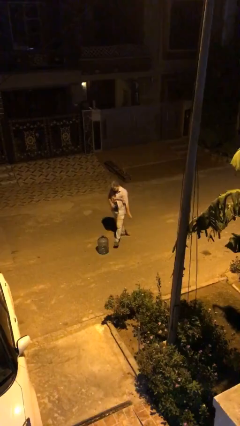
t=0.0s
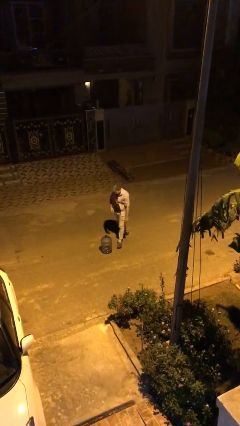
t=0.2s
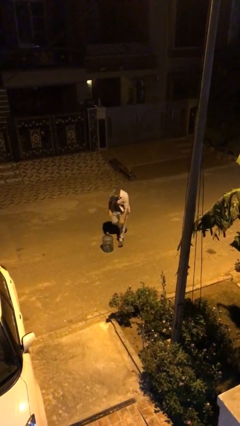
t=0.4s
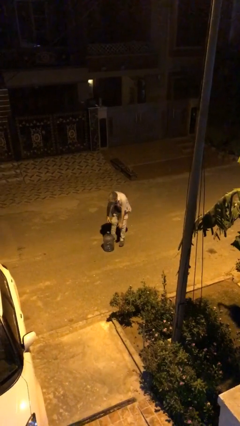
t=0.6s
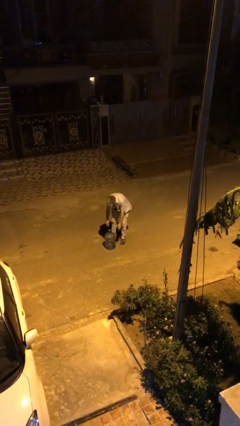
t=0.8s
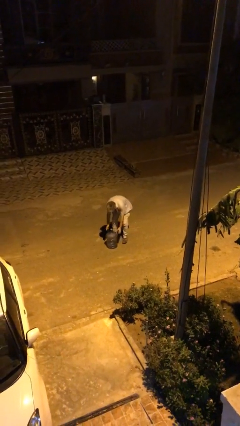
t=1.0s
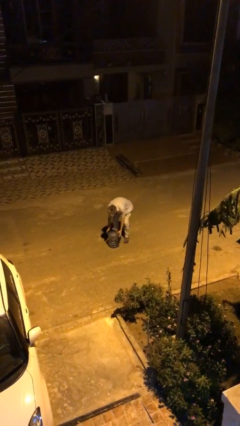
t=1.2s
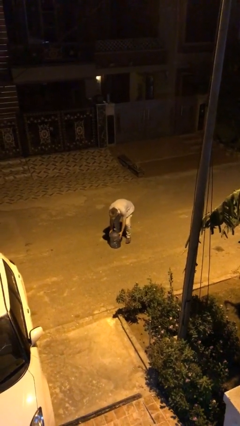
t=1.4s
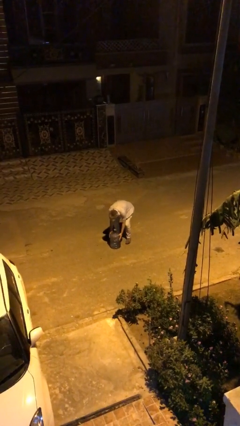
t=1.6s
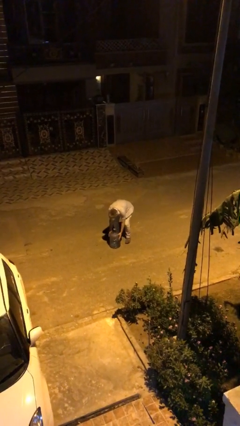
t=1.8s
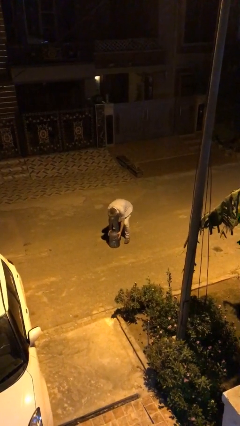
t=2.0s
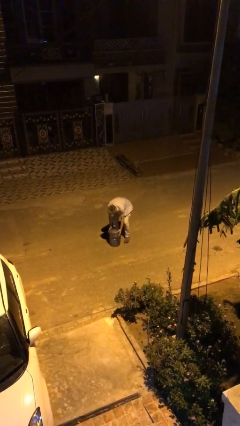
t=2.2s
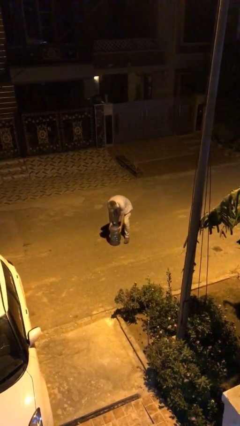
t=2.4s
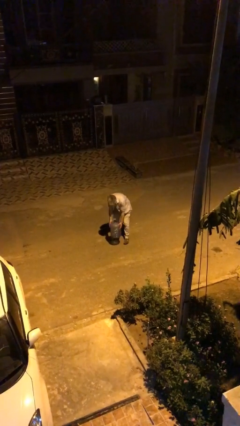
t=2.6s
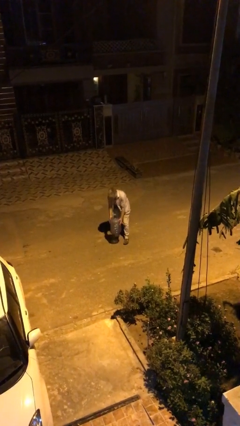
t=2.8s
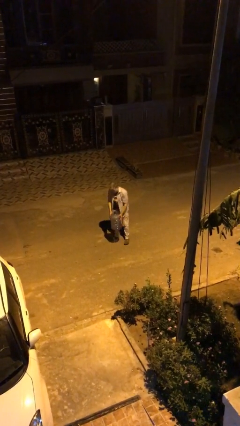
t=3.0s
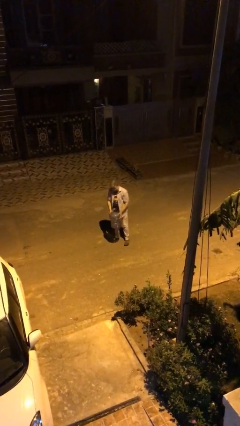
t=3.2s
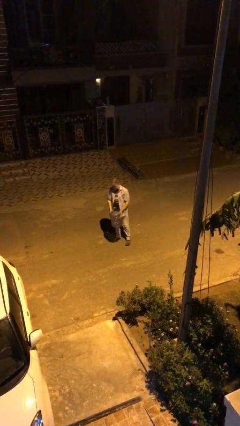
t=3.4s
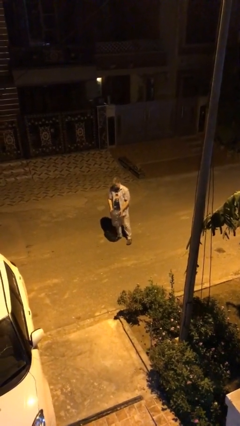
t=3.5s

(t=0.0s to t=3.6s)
person picks up object from floor

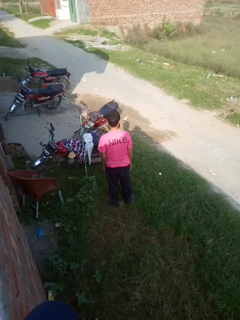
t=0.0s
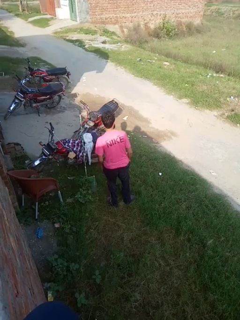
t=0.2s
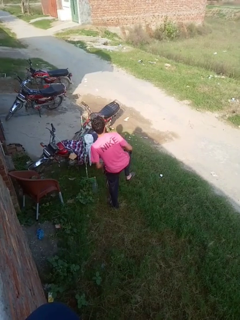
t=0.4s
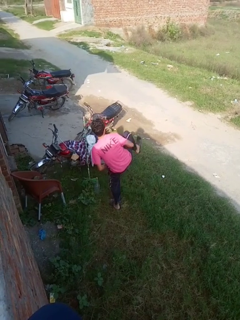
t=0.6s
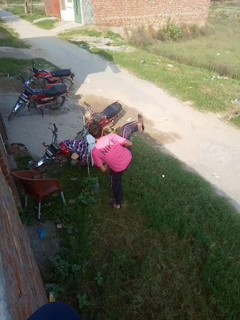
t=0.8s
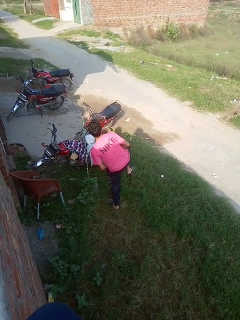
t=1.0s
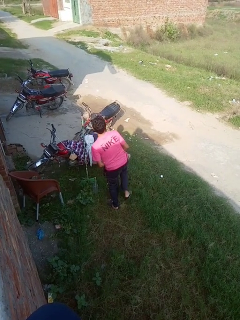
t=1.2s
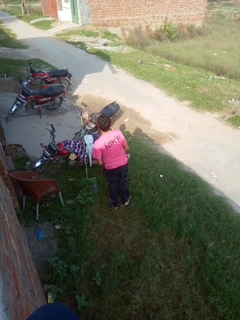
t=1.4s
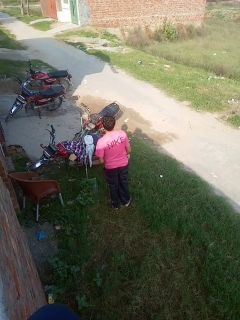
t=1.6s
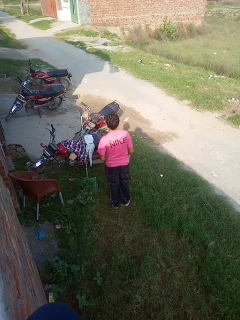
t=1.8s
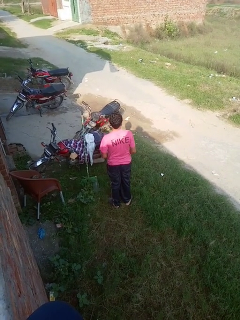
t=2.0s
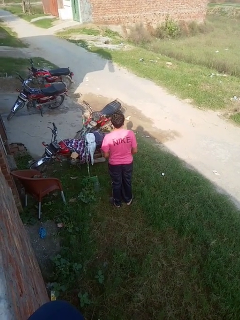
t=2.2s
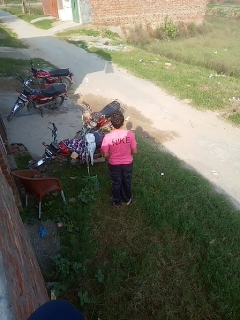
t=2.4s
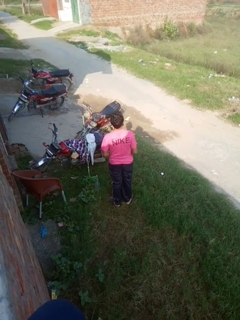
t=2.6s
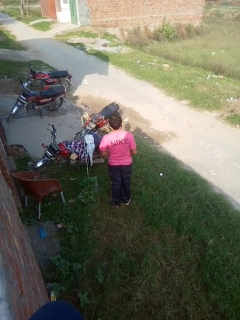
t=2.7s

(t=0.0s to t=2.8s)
person karate kicks

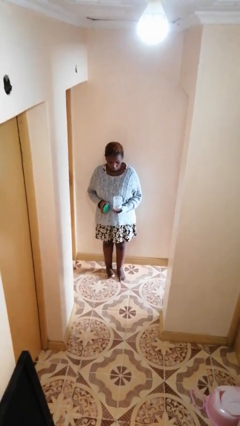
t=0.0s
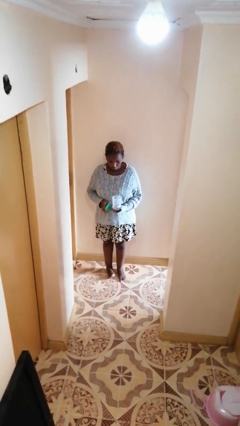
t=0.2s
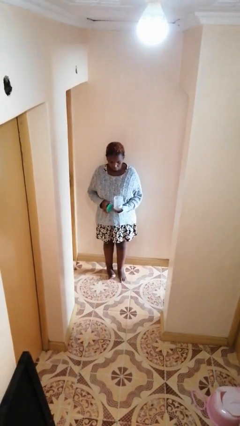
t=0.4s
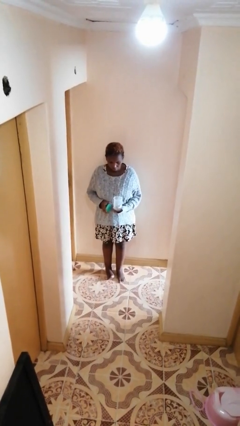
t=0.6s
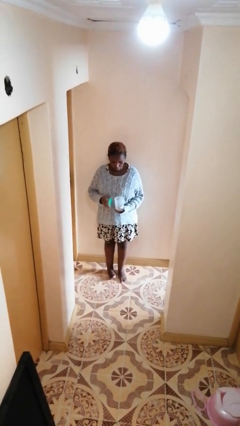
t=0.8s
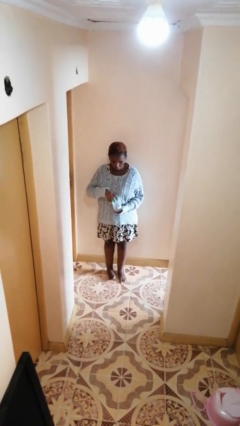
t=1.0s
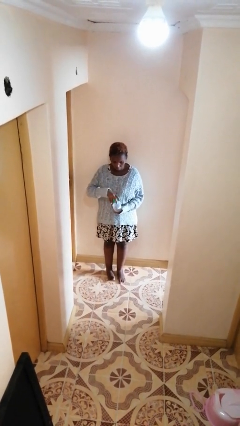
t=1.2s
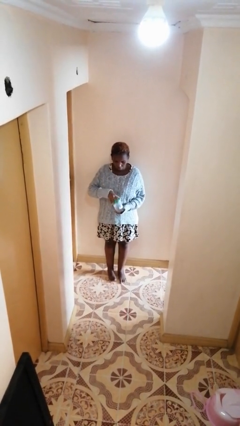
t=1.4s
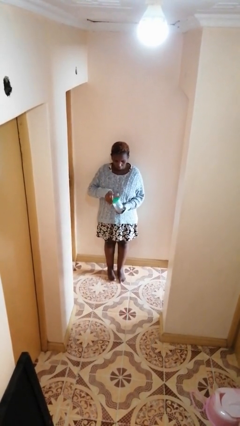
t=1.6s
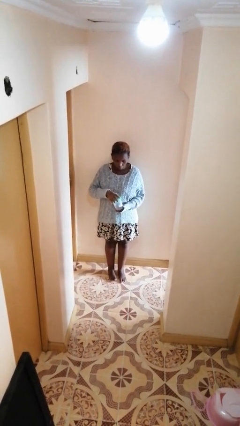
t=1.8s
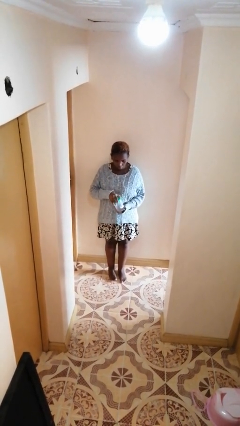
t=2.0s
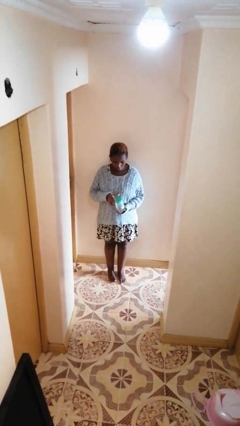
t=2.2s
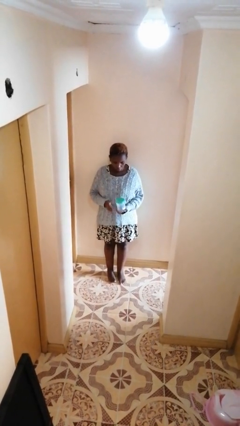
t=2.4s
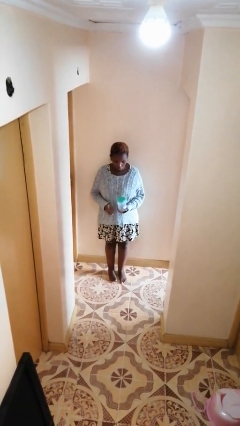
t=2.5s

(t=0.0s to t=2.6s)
person closes jar

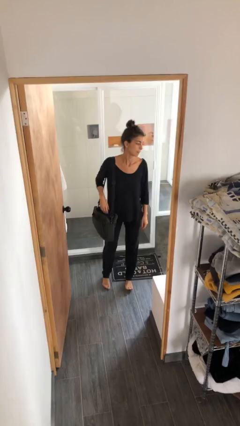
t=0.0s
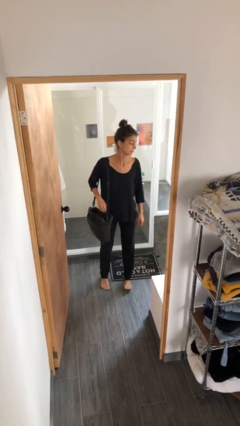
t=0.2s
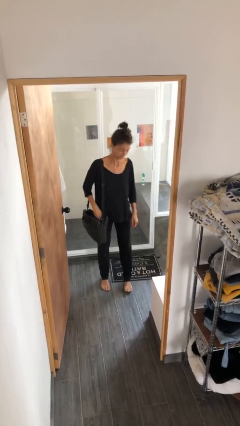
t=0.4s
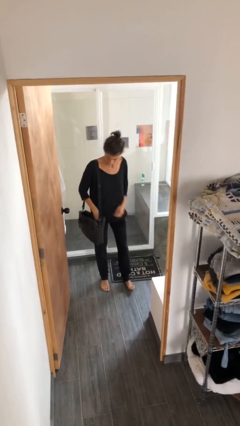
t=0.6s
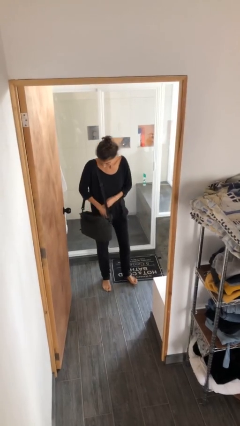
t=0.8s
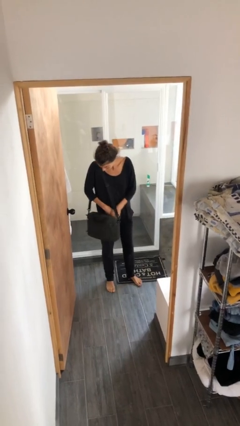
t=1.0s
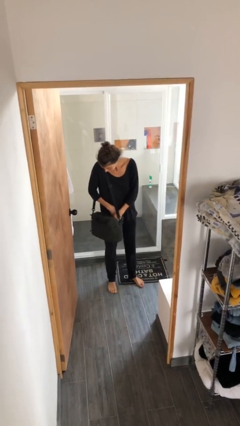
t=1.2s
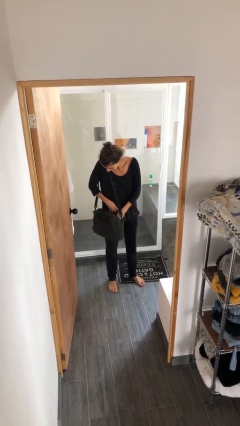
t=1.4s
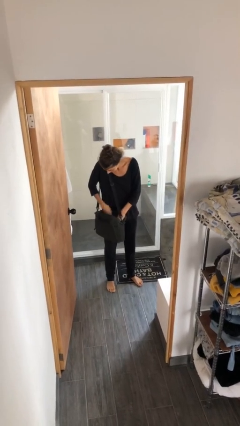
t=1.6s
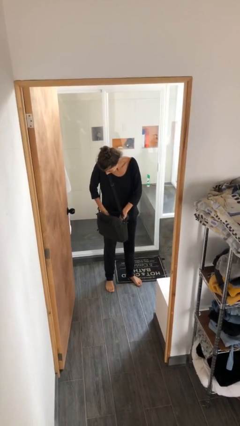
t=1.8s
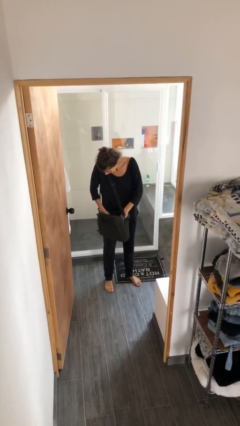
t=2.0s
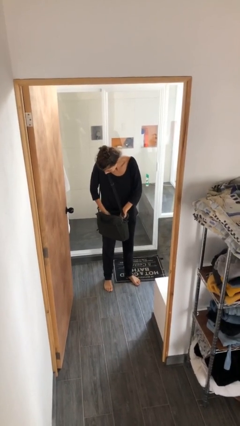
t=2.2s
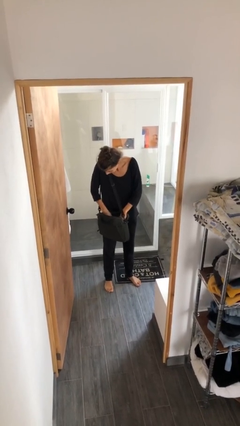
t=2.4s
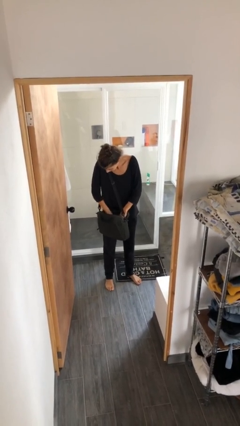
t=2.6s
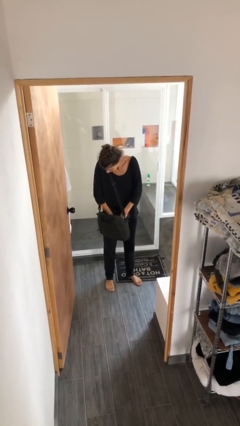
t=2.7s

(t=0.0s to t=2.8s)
person searches in purse

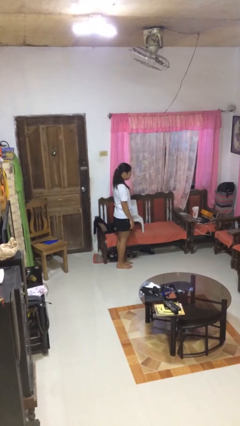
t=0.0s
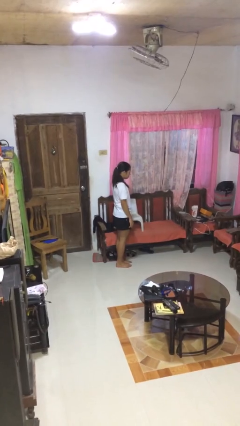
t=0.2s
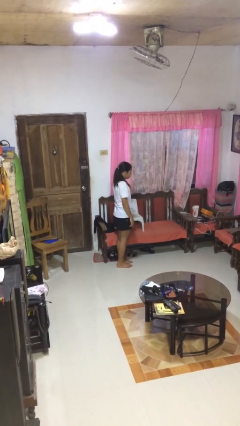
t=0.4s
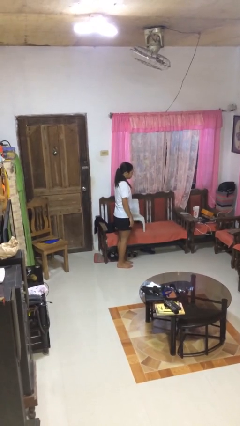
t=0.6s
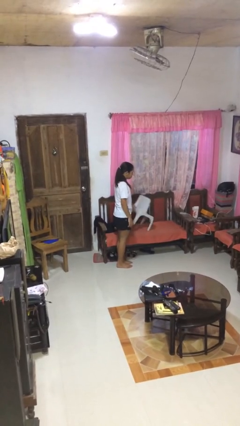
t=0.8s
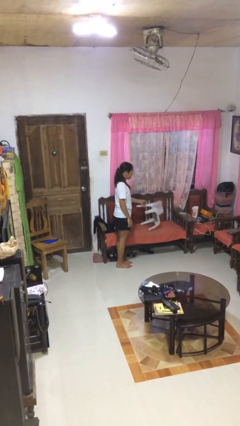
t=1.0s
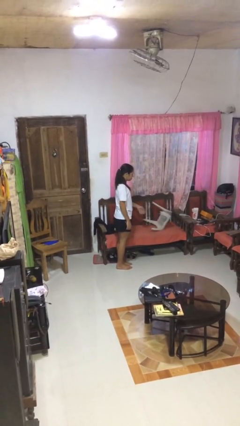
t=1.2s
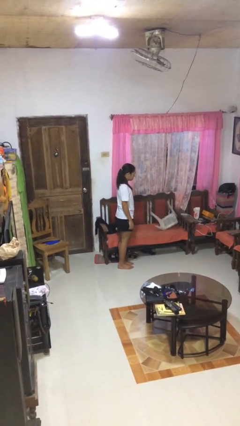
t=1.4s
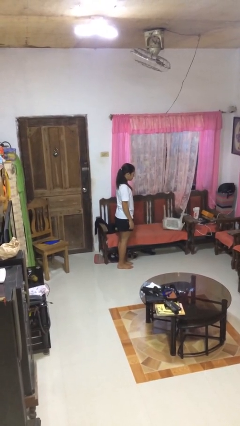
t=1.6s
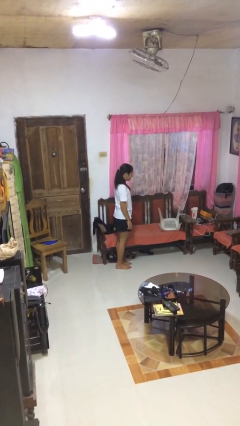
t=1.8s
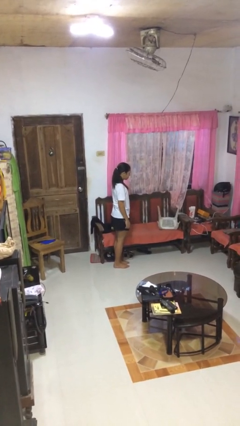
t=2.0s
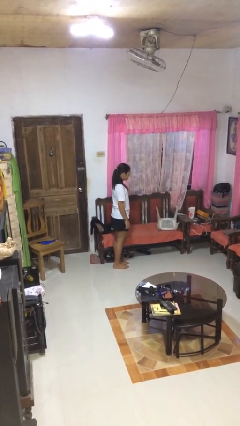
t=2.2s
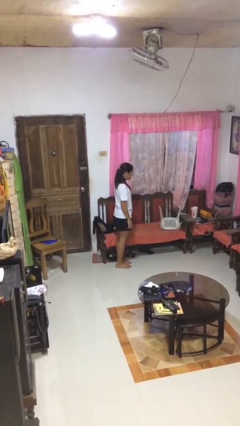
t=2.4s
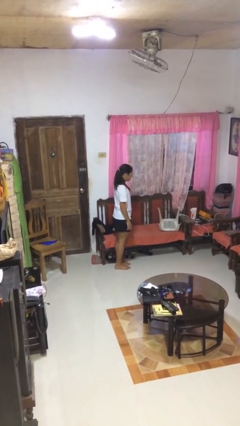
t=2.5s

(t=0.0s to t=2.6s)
person knocks over furniture

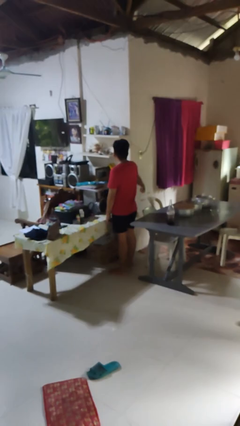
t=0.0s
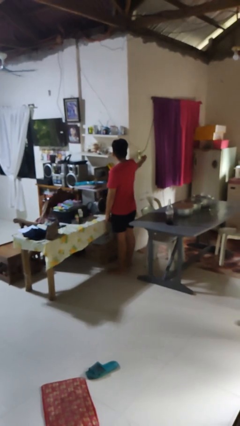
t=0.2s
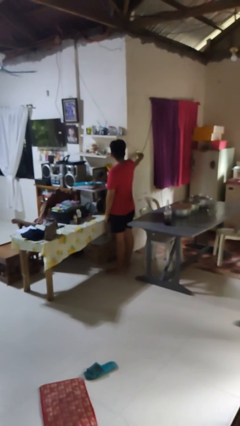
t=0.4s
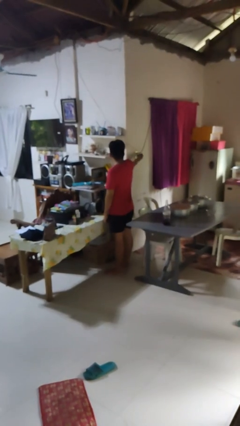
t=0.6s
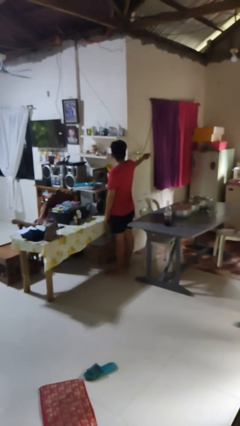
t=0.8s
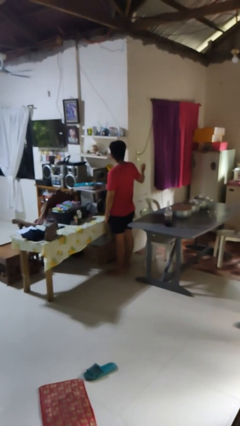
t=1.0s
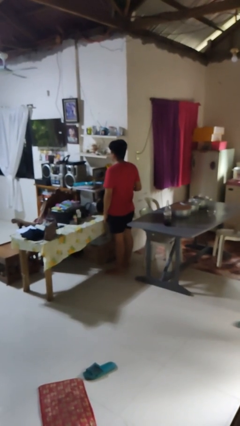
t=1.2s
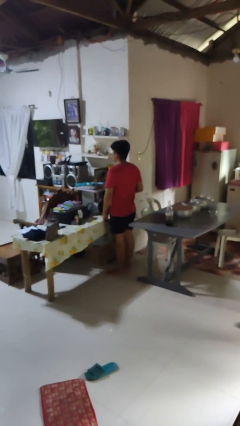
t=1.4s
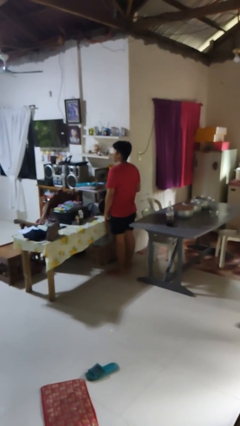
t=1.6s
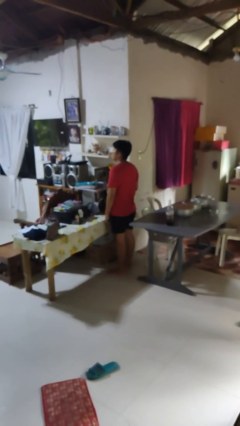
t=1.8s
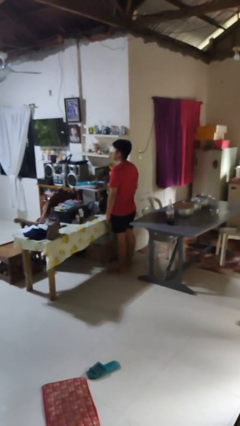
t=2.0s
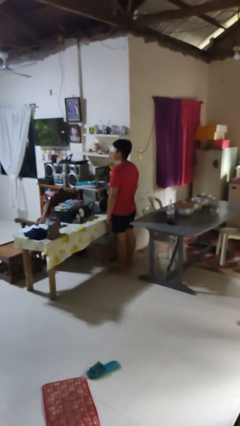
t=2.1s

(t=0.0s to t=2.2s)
person turns off fan

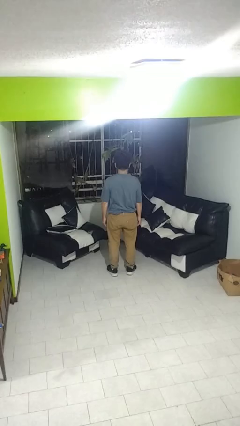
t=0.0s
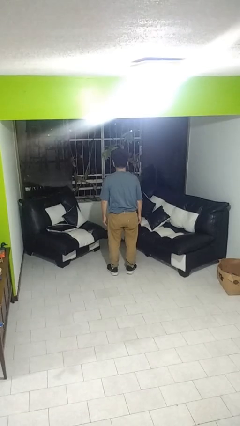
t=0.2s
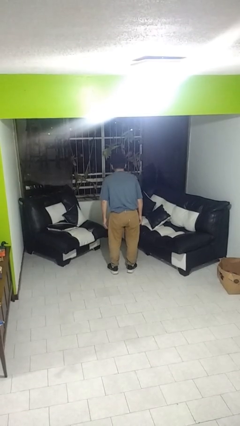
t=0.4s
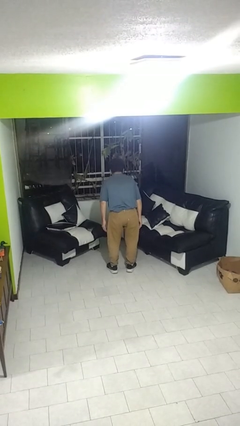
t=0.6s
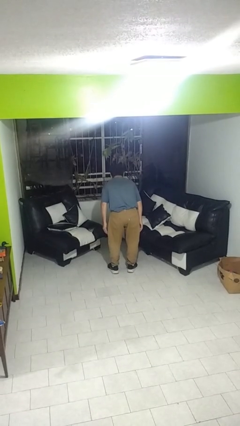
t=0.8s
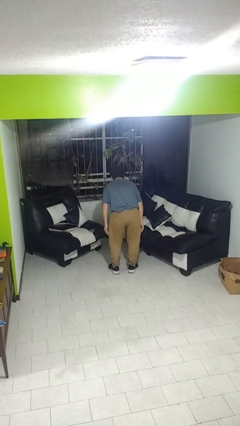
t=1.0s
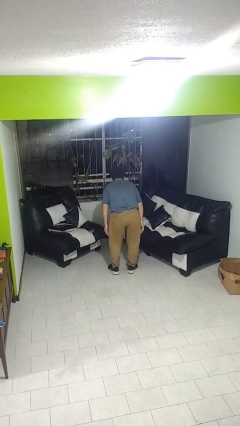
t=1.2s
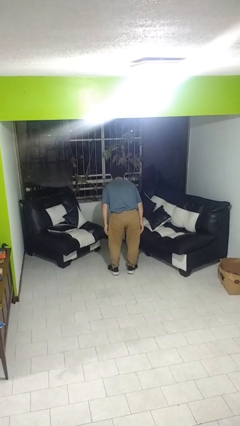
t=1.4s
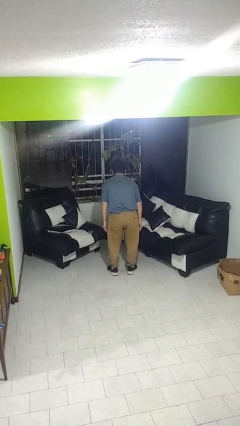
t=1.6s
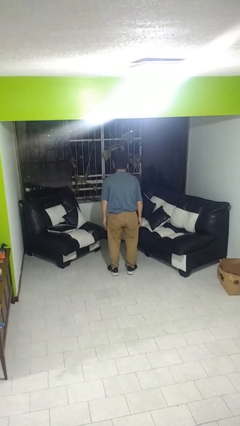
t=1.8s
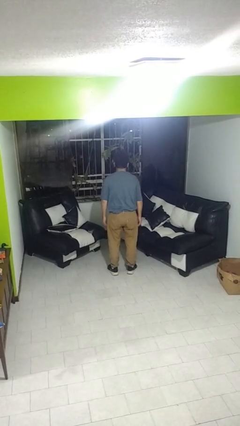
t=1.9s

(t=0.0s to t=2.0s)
person bows
